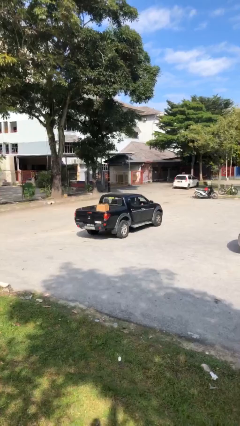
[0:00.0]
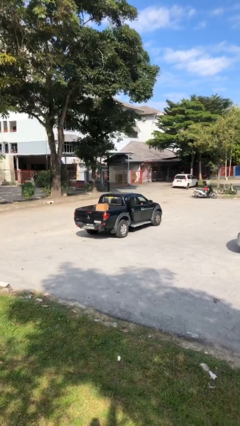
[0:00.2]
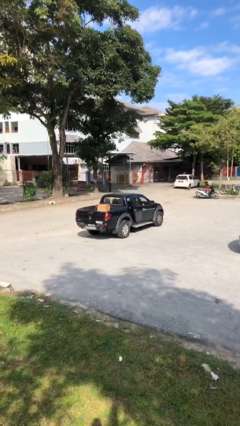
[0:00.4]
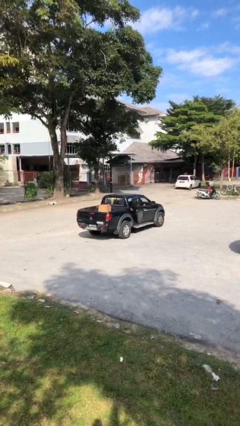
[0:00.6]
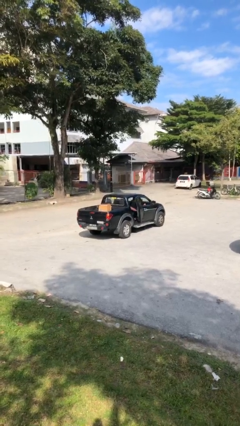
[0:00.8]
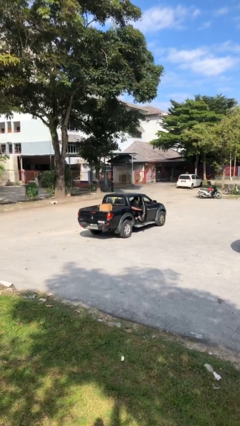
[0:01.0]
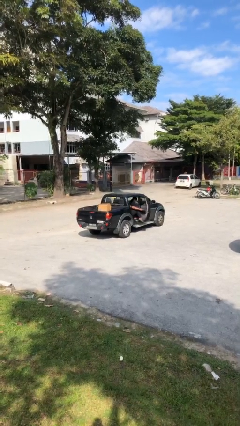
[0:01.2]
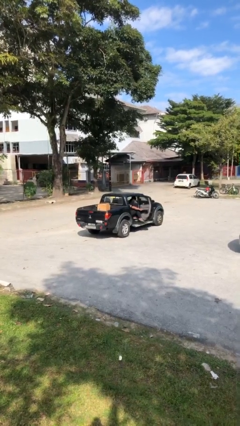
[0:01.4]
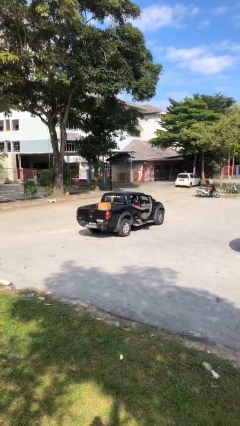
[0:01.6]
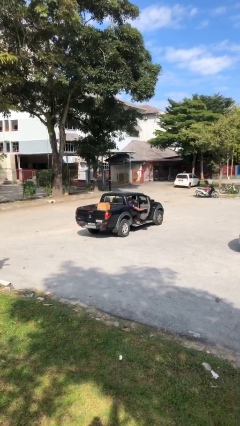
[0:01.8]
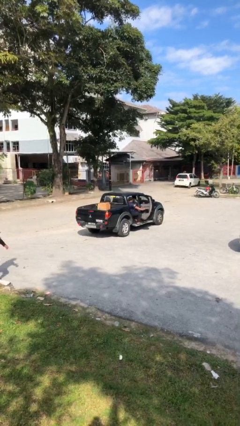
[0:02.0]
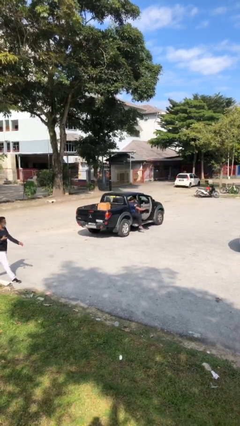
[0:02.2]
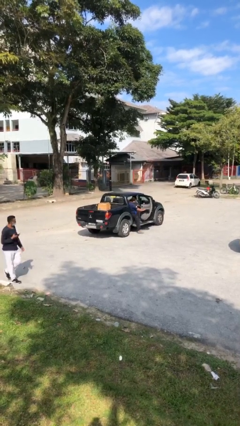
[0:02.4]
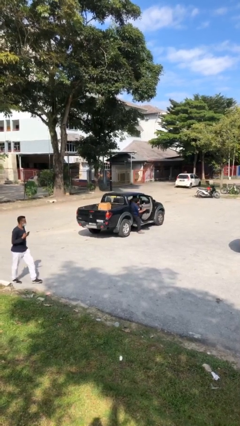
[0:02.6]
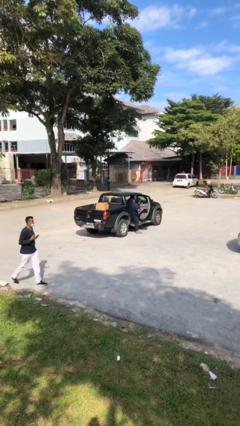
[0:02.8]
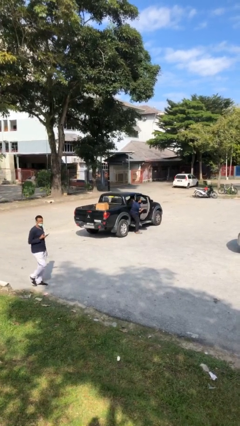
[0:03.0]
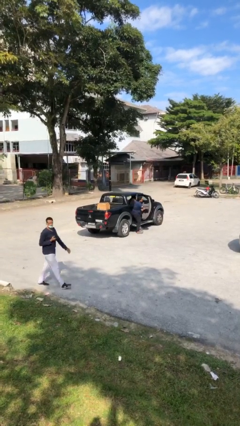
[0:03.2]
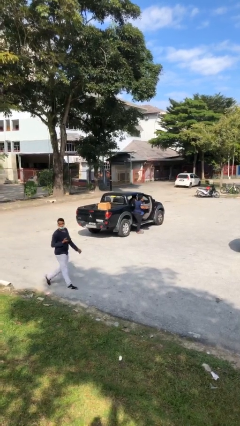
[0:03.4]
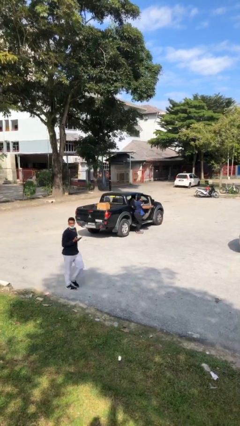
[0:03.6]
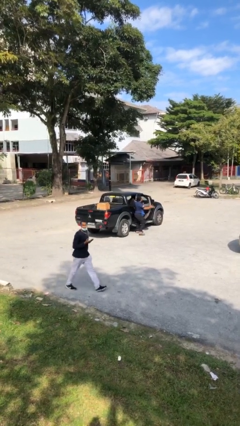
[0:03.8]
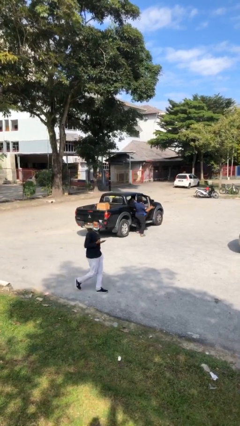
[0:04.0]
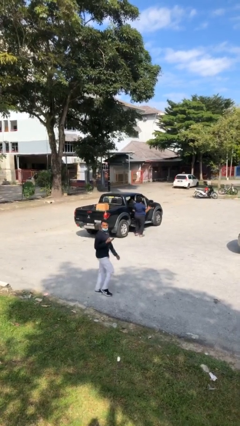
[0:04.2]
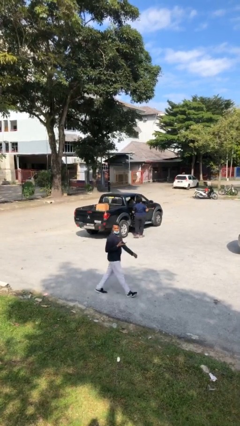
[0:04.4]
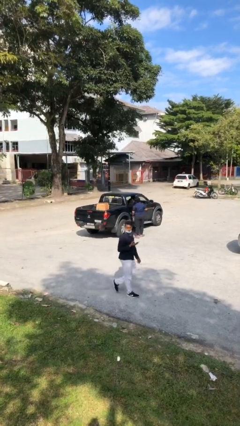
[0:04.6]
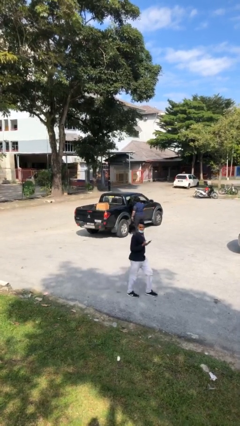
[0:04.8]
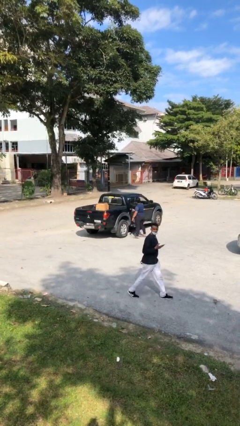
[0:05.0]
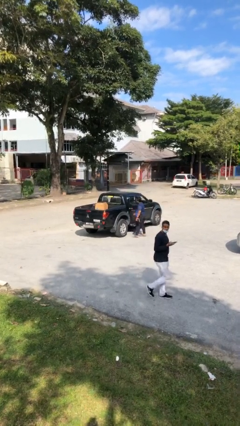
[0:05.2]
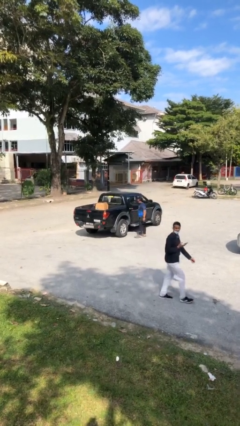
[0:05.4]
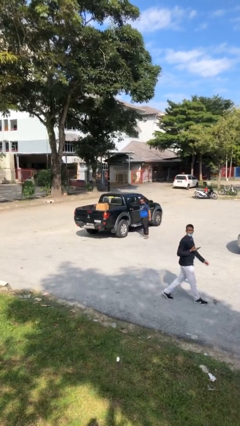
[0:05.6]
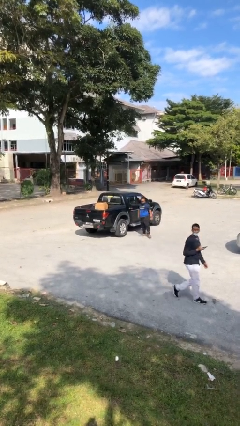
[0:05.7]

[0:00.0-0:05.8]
car drops off person

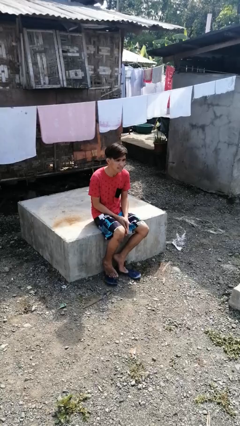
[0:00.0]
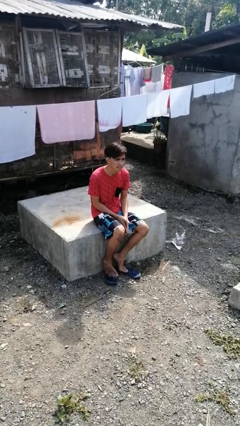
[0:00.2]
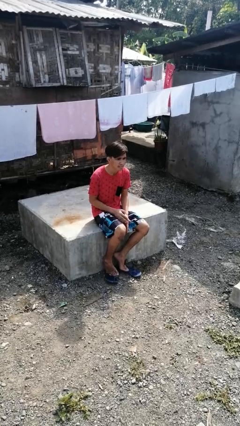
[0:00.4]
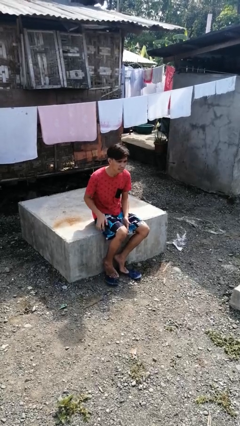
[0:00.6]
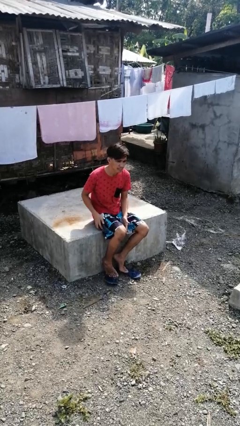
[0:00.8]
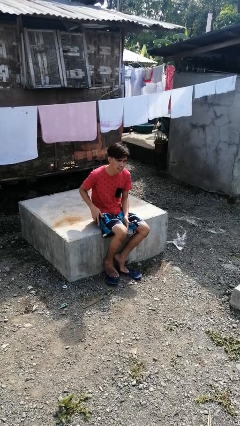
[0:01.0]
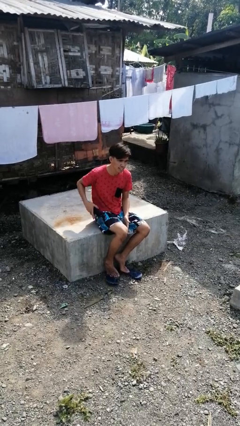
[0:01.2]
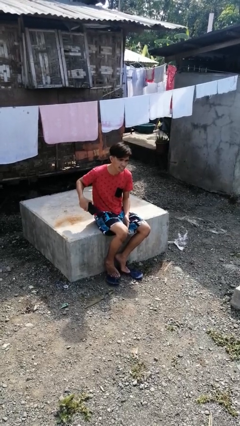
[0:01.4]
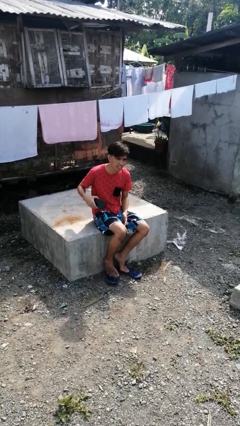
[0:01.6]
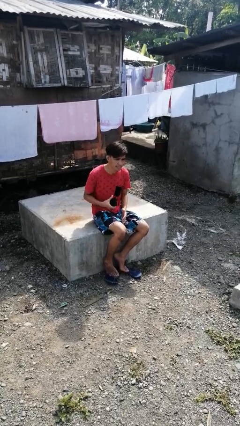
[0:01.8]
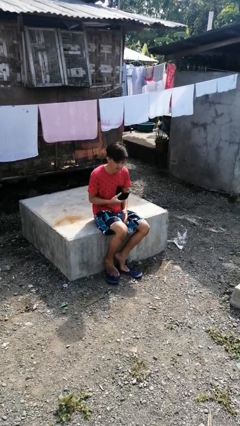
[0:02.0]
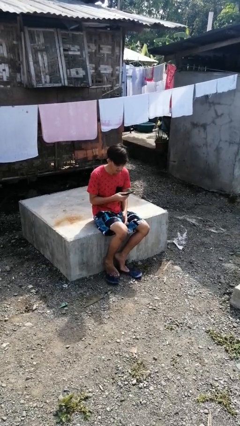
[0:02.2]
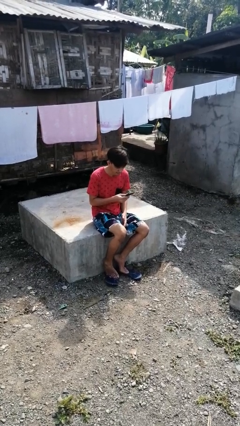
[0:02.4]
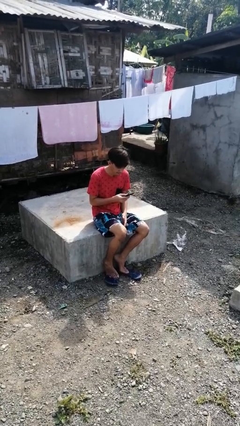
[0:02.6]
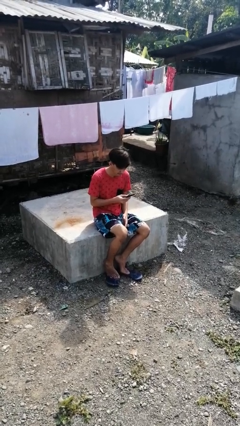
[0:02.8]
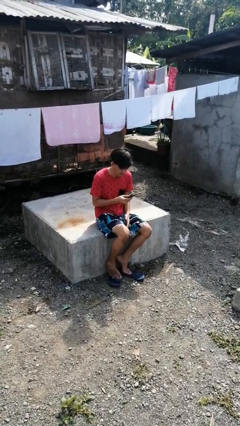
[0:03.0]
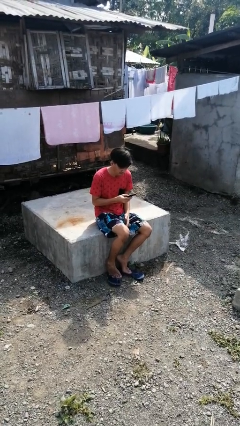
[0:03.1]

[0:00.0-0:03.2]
person takes phone from pocket

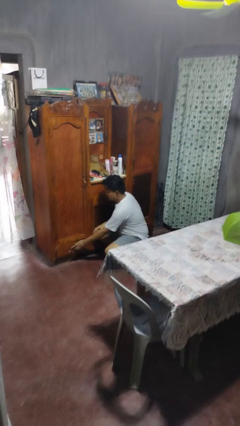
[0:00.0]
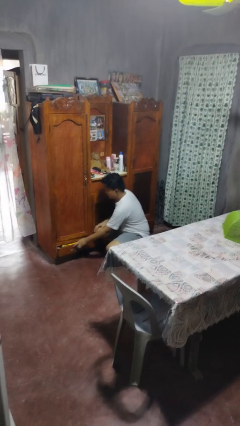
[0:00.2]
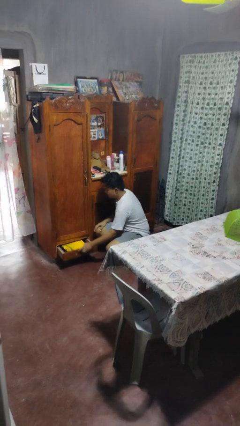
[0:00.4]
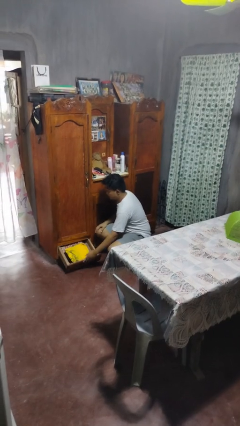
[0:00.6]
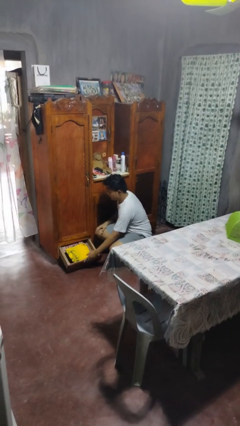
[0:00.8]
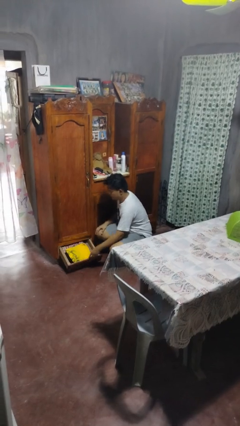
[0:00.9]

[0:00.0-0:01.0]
person opens dresser drawer

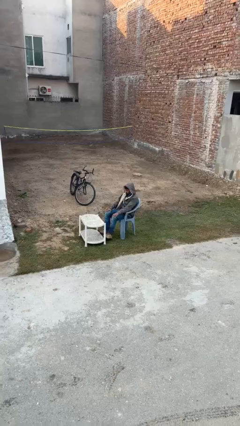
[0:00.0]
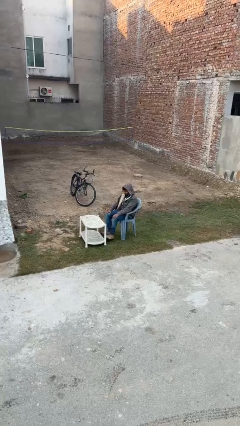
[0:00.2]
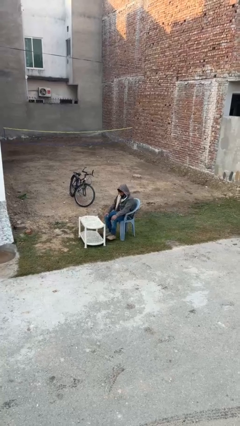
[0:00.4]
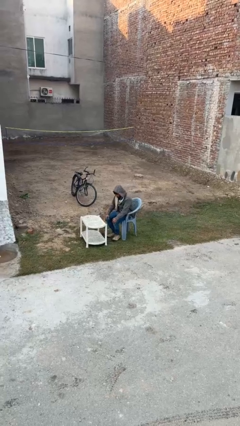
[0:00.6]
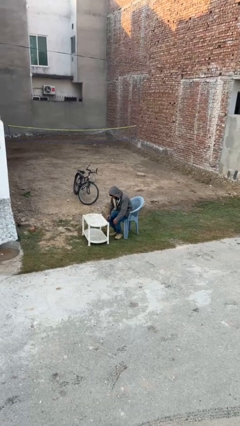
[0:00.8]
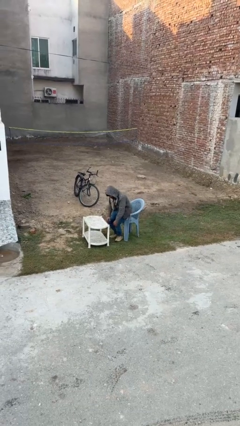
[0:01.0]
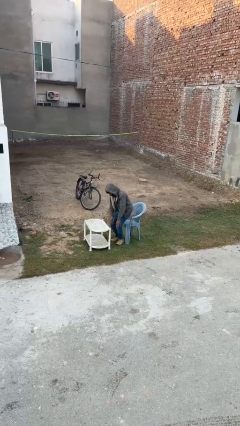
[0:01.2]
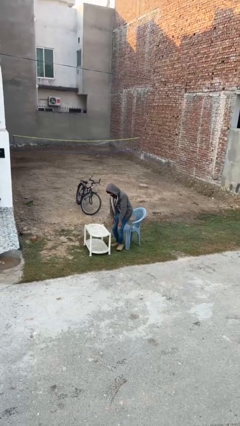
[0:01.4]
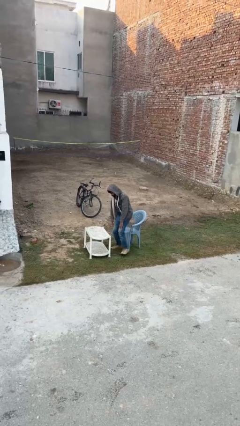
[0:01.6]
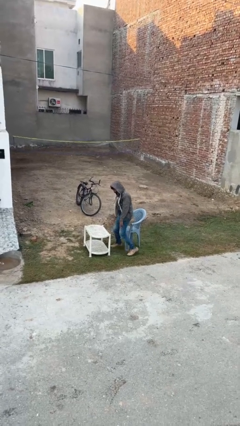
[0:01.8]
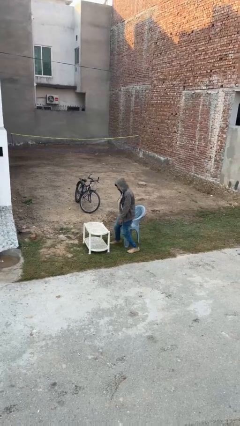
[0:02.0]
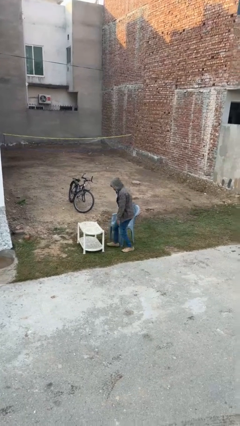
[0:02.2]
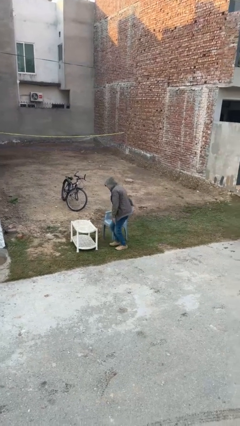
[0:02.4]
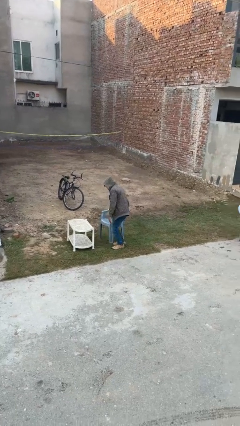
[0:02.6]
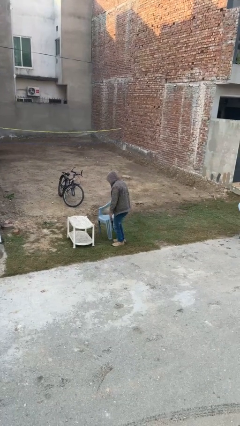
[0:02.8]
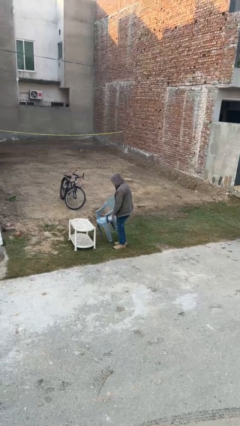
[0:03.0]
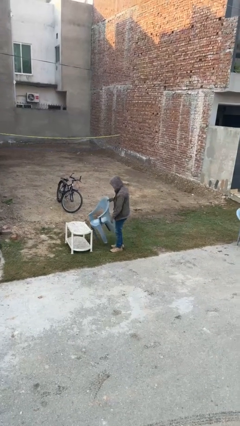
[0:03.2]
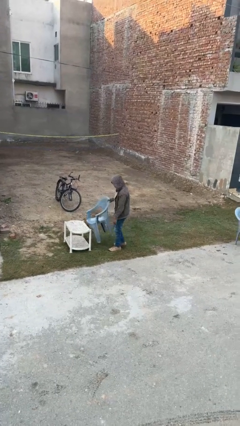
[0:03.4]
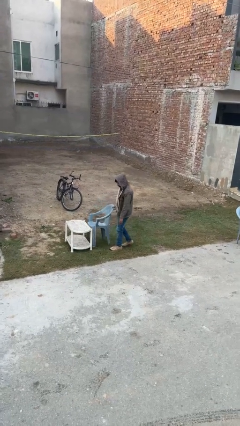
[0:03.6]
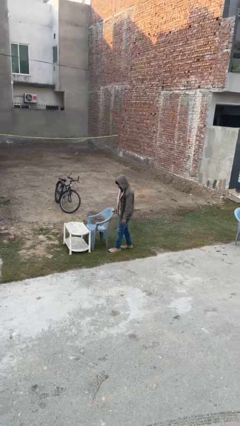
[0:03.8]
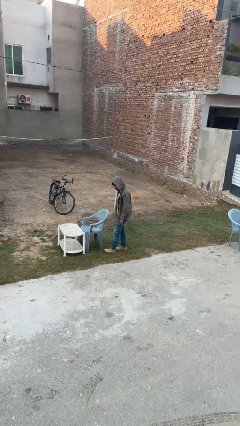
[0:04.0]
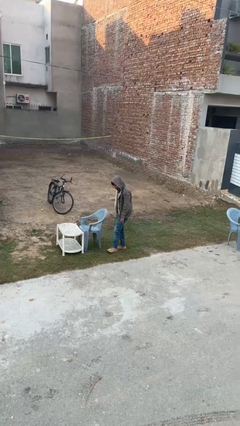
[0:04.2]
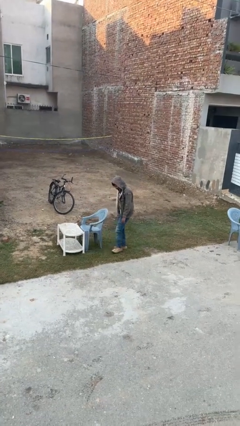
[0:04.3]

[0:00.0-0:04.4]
person stands up

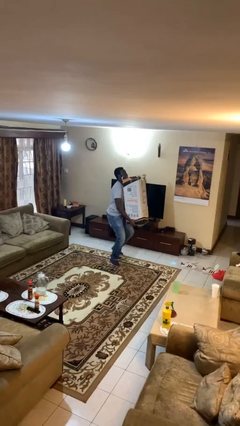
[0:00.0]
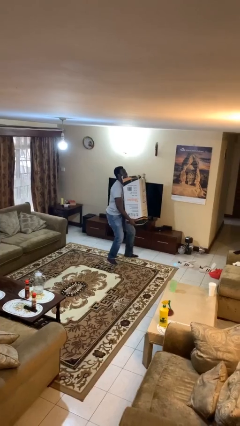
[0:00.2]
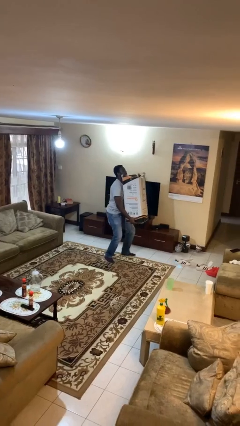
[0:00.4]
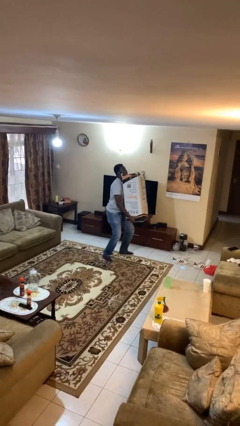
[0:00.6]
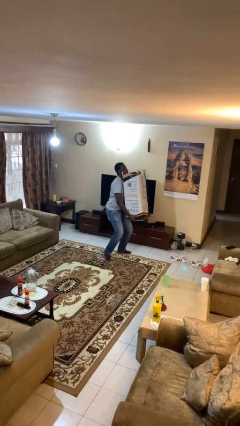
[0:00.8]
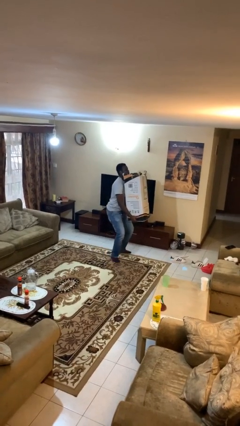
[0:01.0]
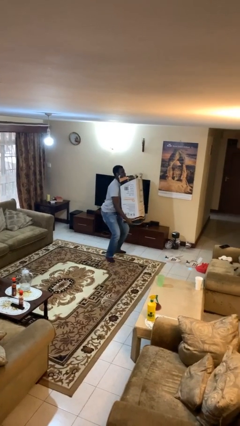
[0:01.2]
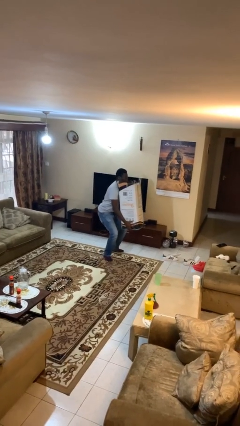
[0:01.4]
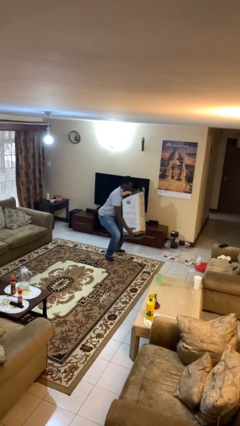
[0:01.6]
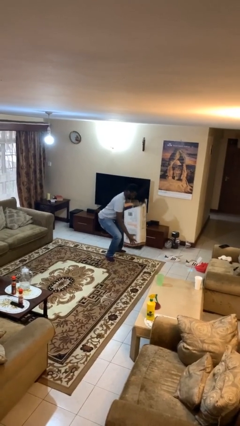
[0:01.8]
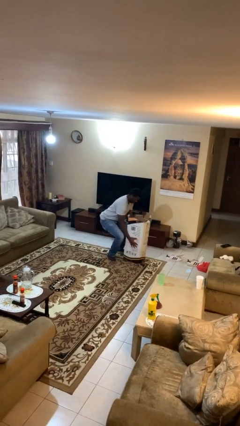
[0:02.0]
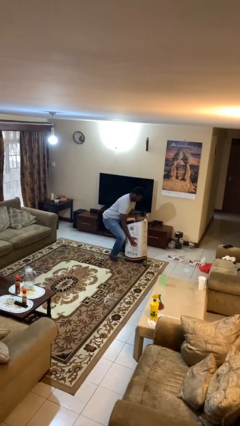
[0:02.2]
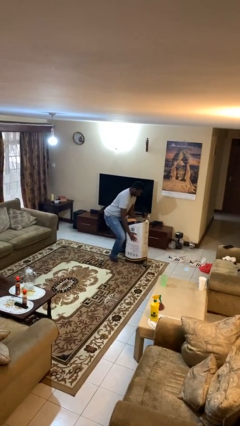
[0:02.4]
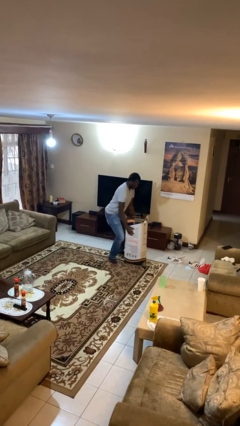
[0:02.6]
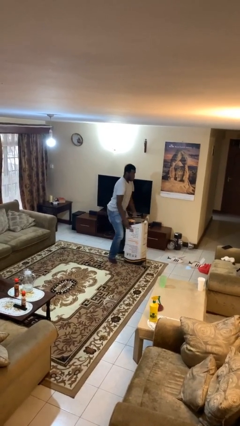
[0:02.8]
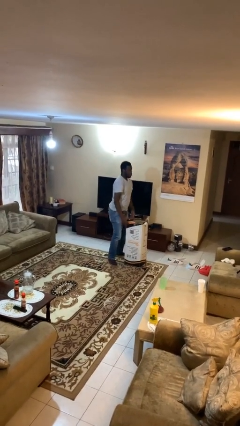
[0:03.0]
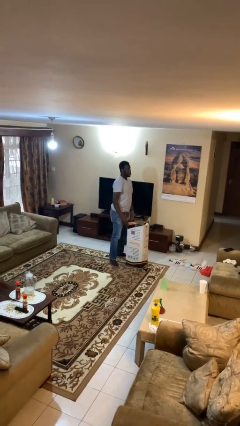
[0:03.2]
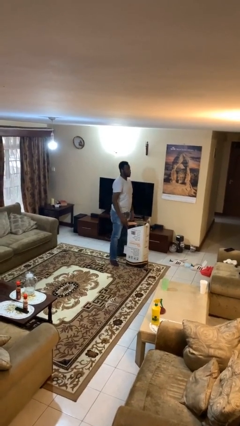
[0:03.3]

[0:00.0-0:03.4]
person puts down object on floor
